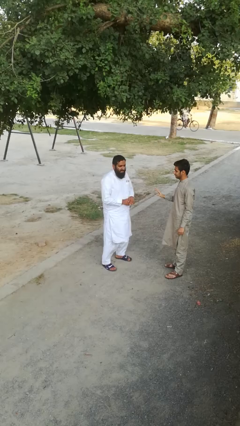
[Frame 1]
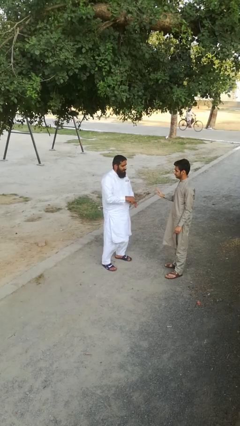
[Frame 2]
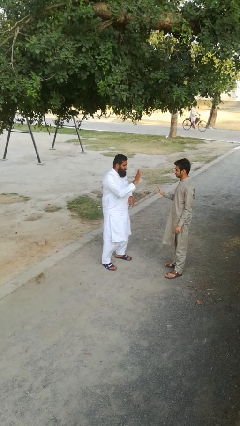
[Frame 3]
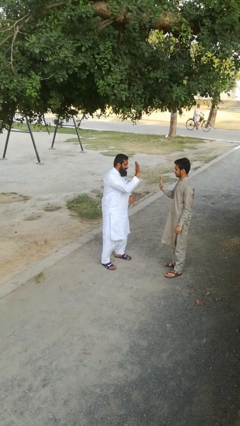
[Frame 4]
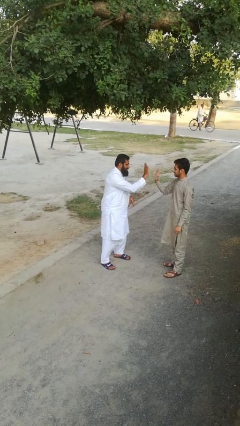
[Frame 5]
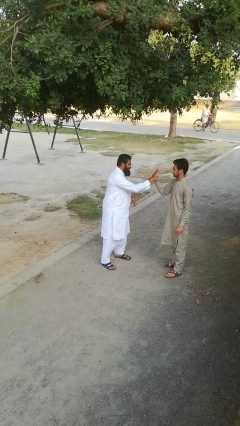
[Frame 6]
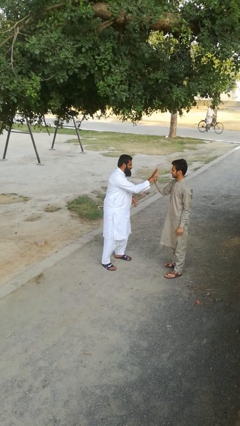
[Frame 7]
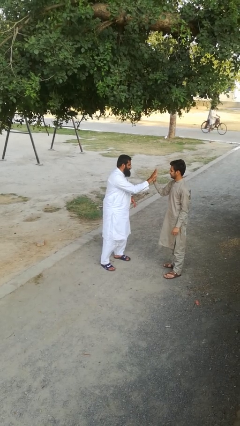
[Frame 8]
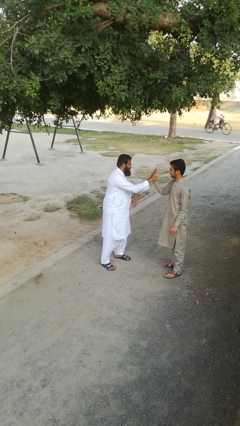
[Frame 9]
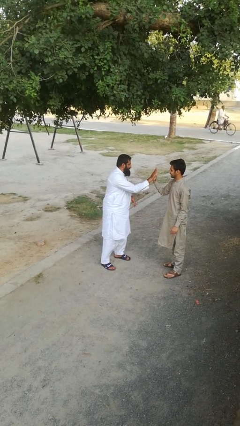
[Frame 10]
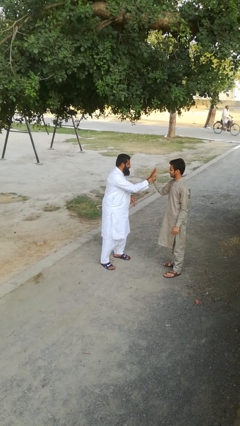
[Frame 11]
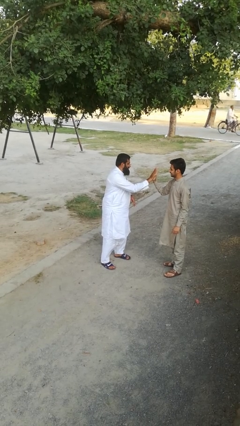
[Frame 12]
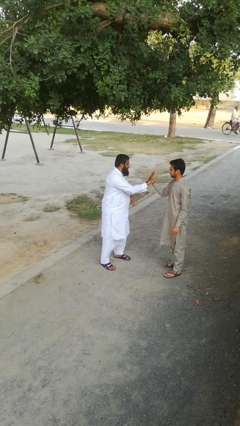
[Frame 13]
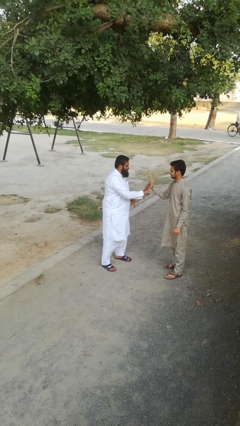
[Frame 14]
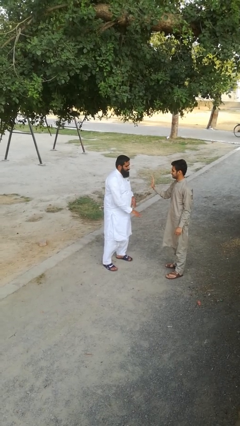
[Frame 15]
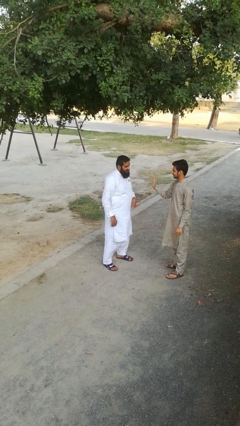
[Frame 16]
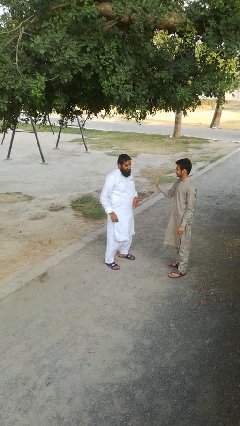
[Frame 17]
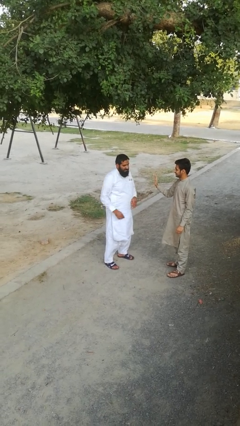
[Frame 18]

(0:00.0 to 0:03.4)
person highfives hand

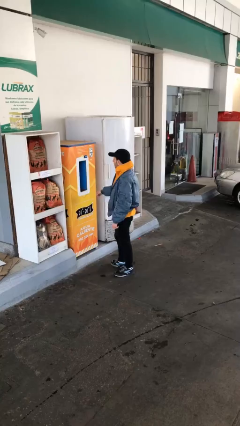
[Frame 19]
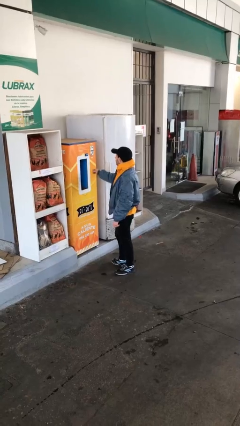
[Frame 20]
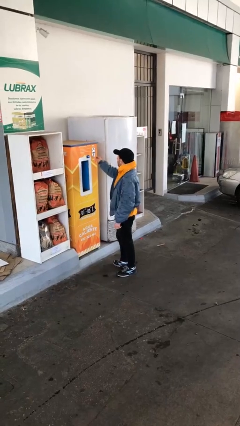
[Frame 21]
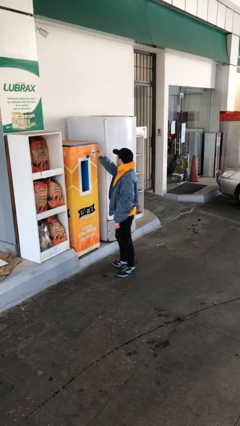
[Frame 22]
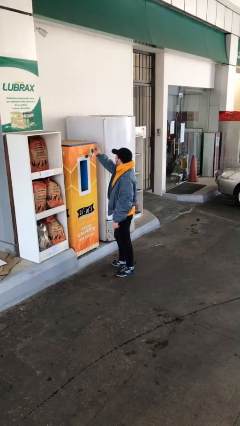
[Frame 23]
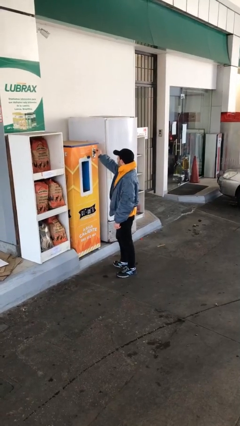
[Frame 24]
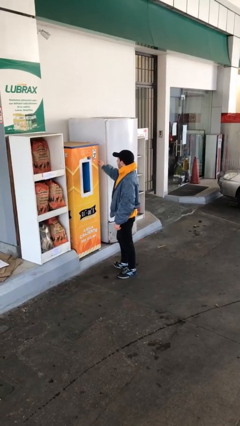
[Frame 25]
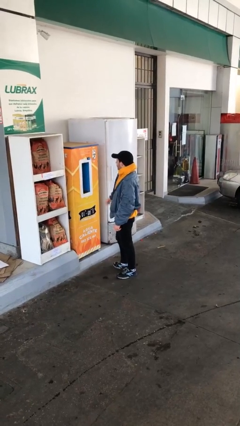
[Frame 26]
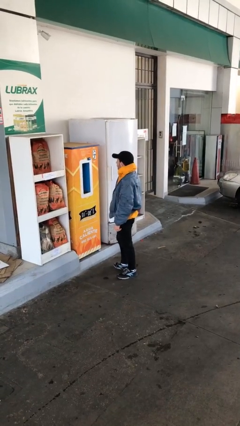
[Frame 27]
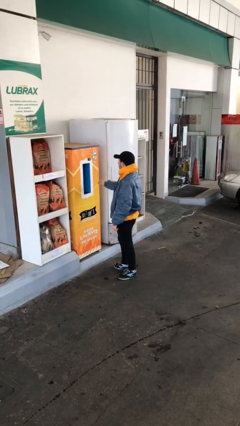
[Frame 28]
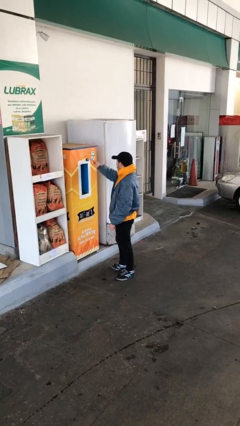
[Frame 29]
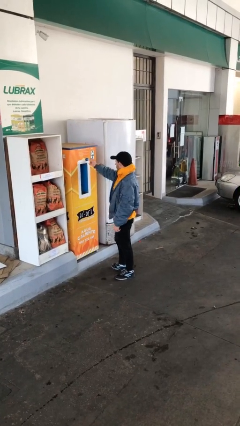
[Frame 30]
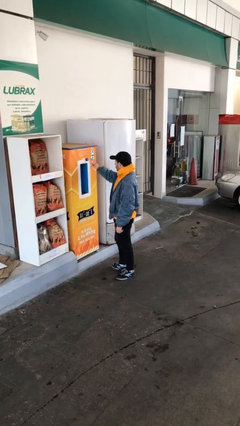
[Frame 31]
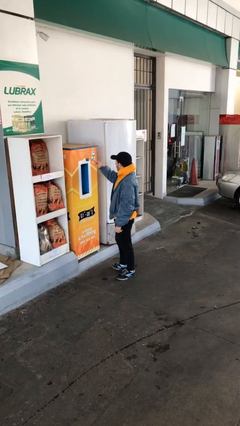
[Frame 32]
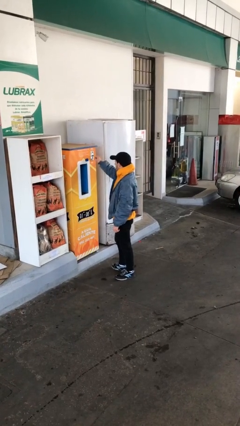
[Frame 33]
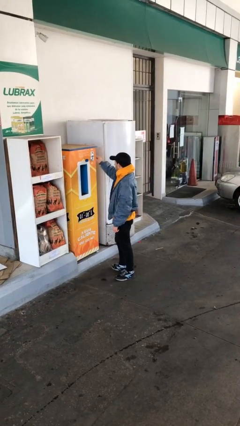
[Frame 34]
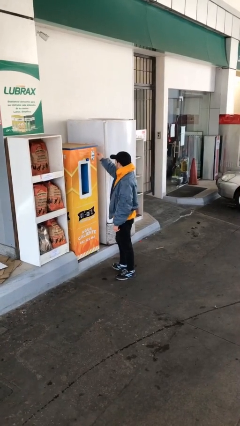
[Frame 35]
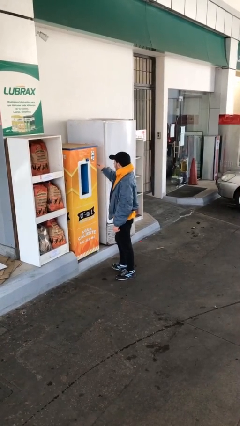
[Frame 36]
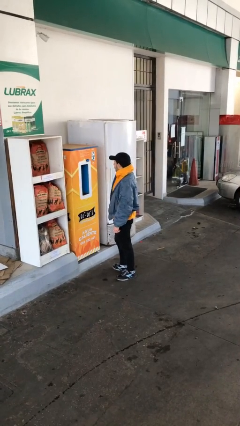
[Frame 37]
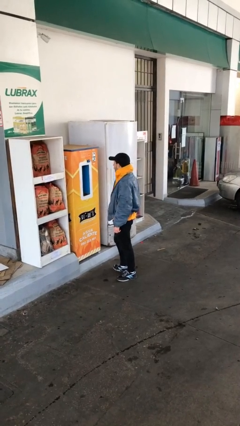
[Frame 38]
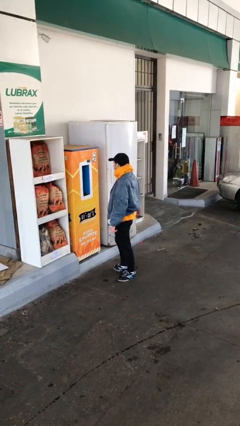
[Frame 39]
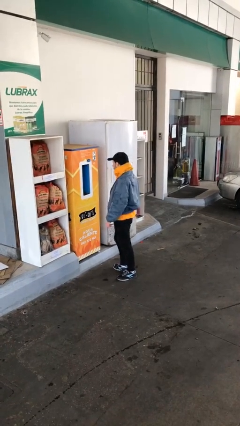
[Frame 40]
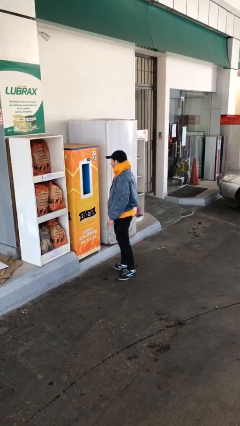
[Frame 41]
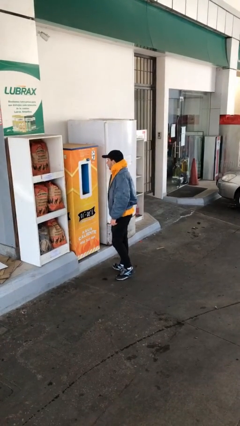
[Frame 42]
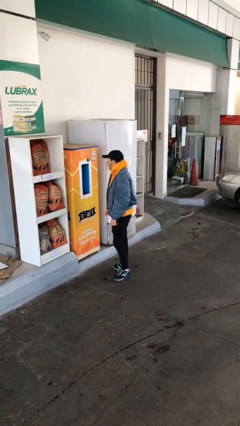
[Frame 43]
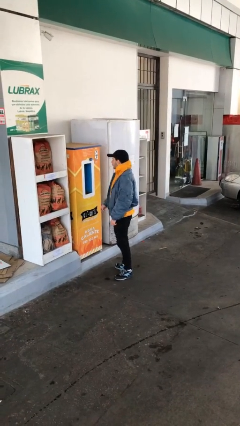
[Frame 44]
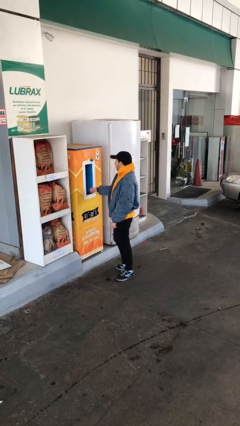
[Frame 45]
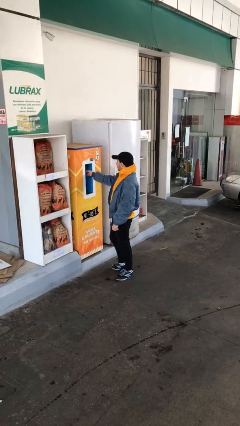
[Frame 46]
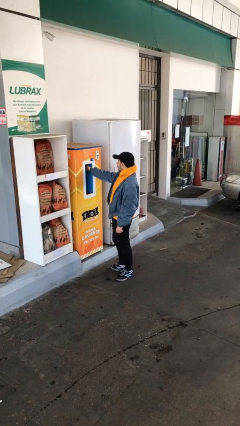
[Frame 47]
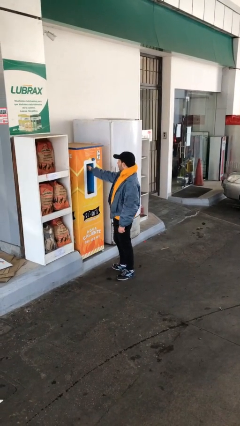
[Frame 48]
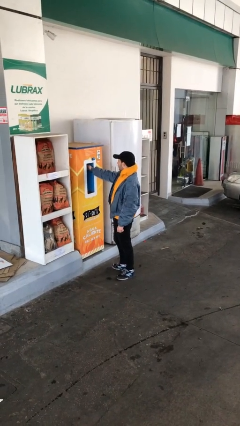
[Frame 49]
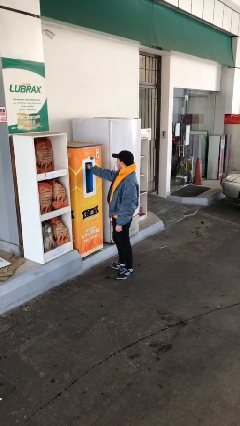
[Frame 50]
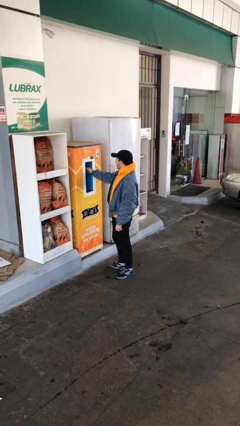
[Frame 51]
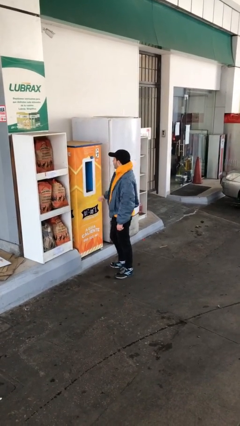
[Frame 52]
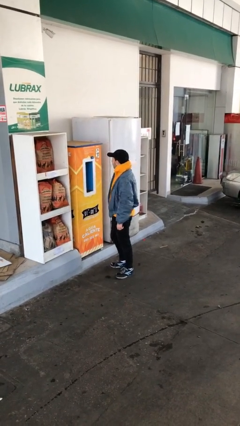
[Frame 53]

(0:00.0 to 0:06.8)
person purchases from machine

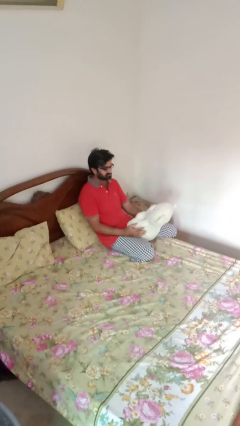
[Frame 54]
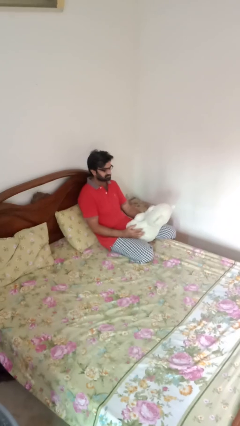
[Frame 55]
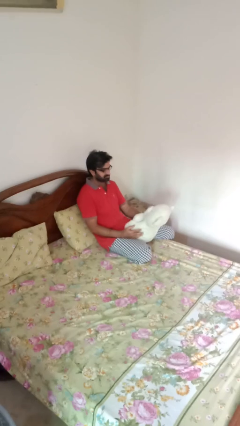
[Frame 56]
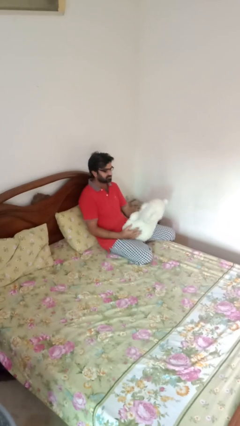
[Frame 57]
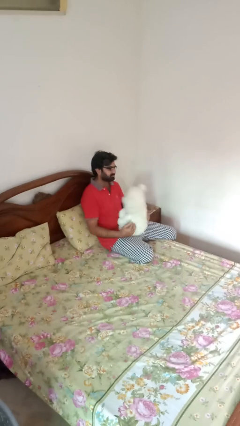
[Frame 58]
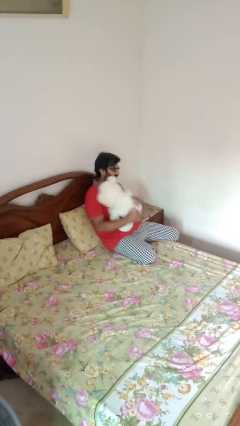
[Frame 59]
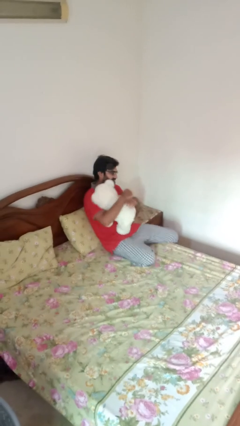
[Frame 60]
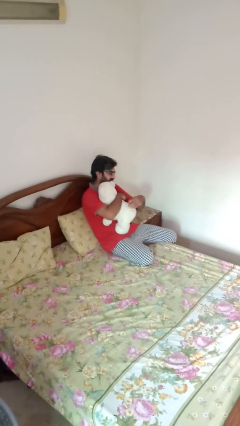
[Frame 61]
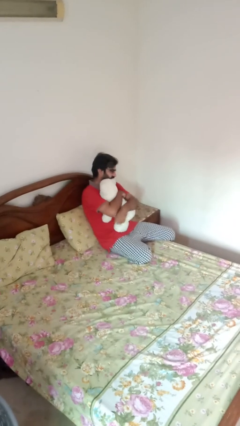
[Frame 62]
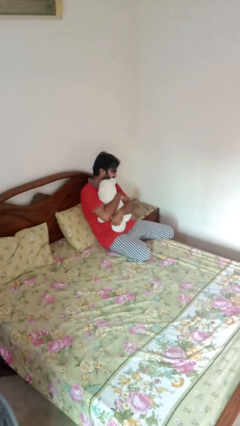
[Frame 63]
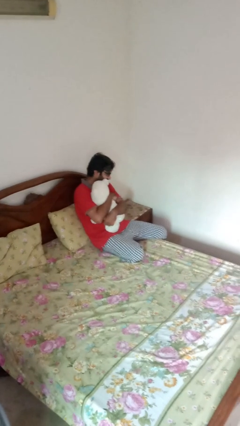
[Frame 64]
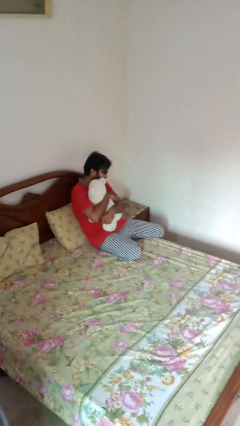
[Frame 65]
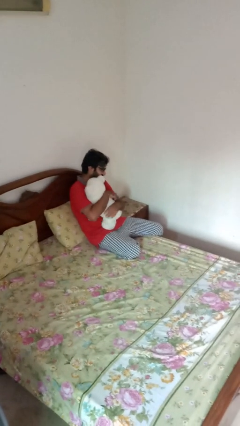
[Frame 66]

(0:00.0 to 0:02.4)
person hugs stuffed animal

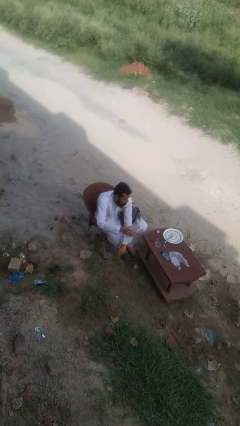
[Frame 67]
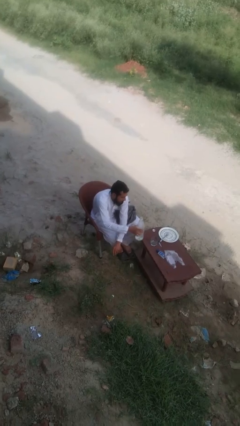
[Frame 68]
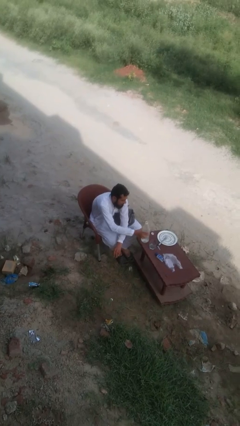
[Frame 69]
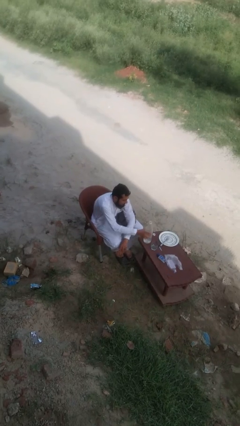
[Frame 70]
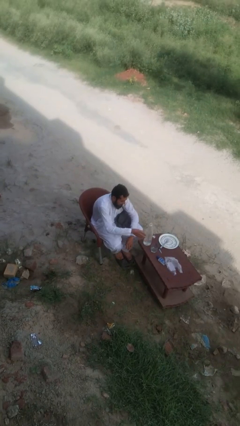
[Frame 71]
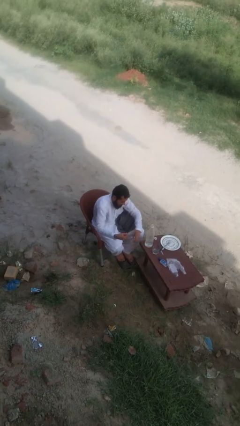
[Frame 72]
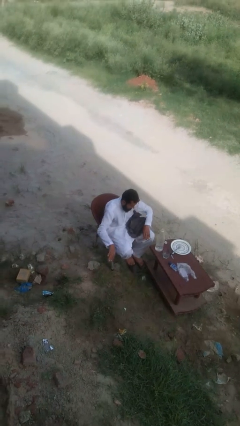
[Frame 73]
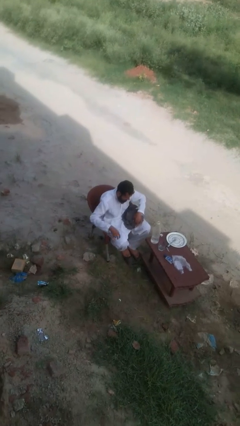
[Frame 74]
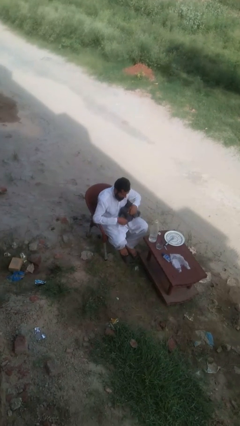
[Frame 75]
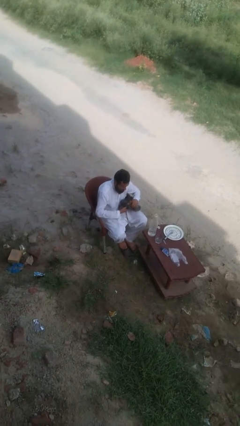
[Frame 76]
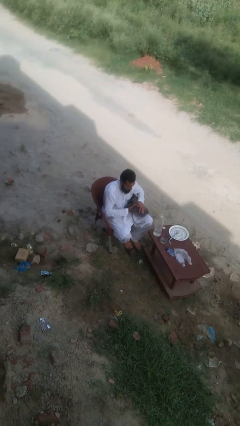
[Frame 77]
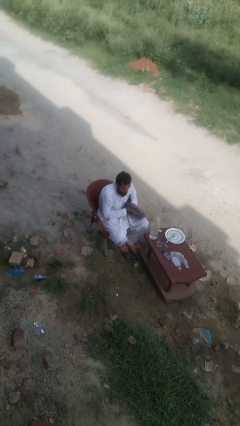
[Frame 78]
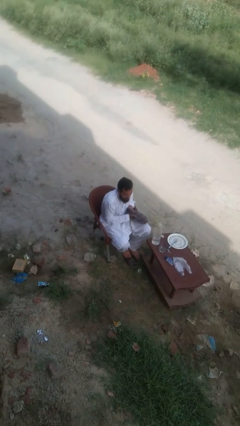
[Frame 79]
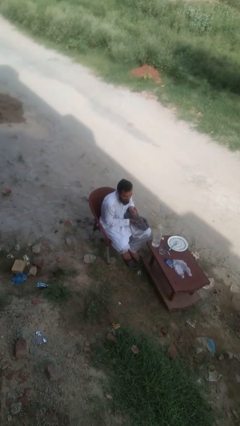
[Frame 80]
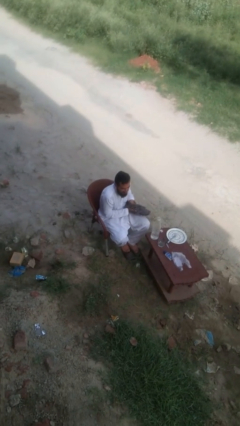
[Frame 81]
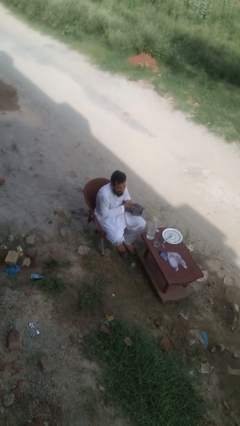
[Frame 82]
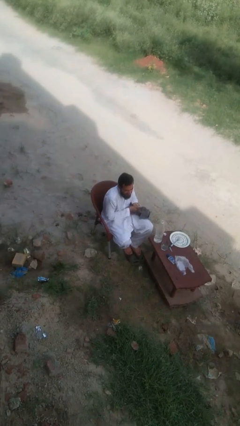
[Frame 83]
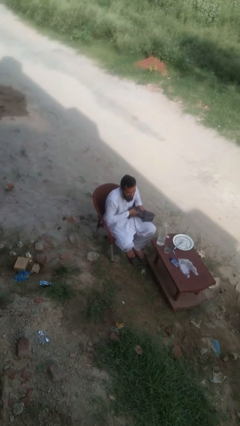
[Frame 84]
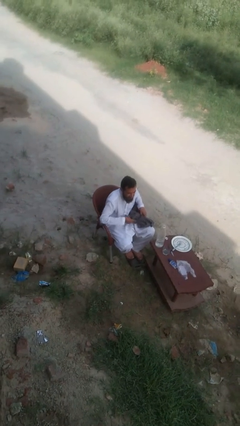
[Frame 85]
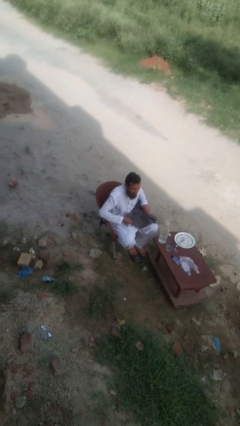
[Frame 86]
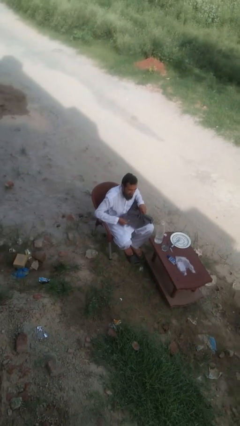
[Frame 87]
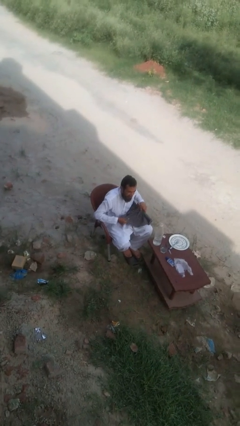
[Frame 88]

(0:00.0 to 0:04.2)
person dries hands with towel

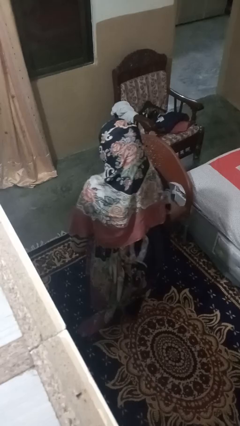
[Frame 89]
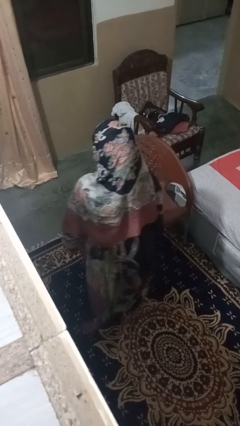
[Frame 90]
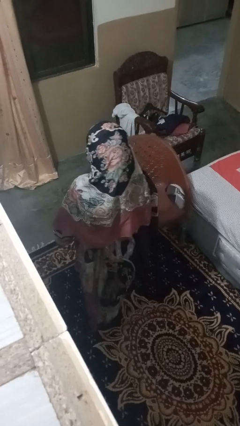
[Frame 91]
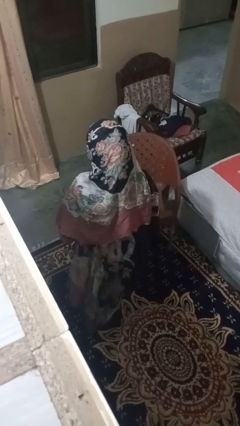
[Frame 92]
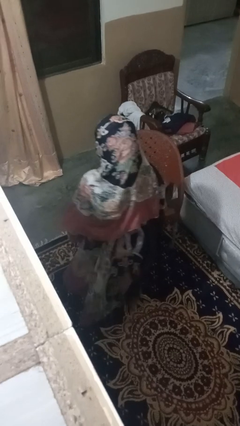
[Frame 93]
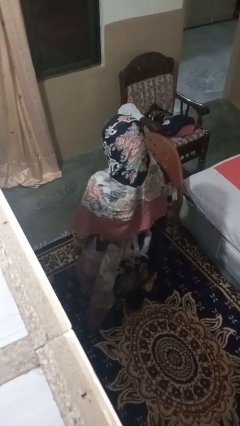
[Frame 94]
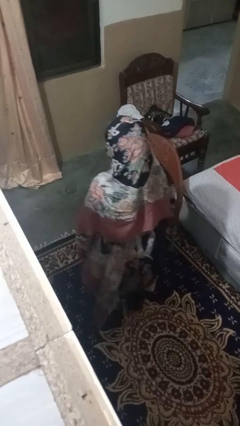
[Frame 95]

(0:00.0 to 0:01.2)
person trips on object on floor
